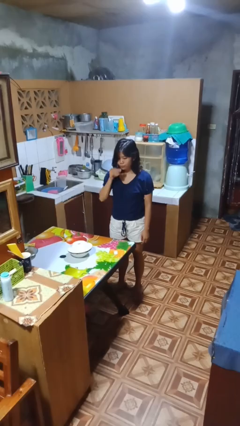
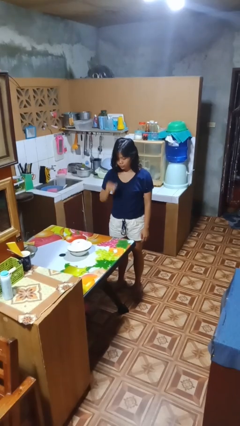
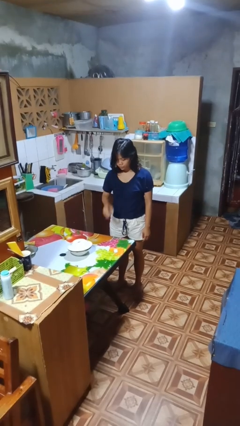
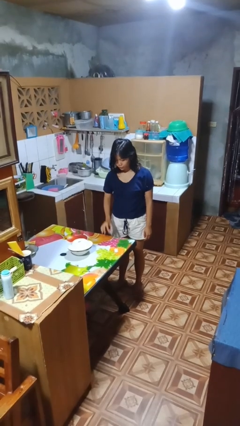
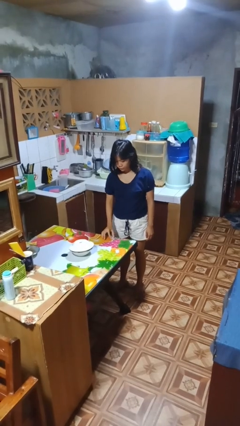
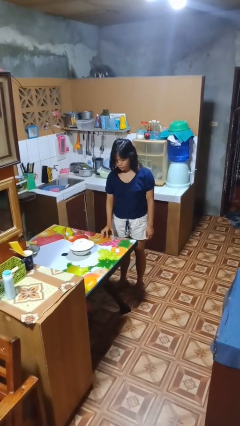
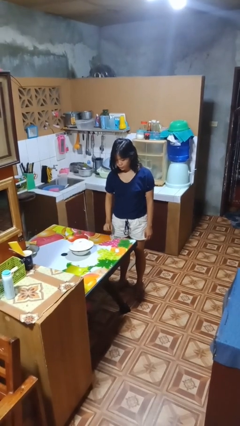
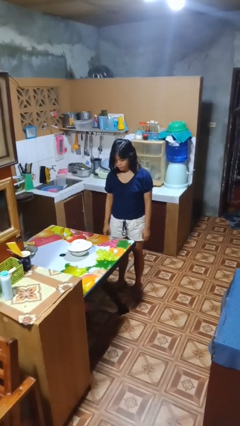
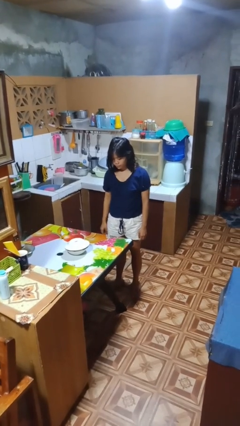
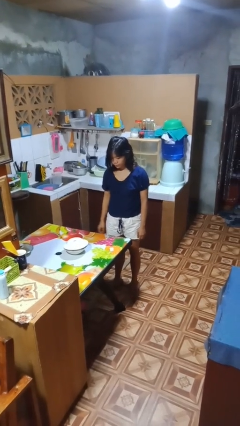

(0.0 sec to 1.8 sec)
person puts down object on table

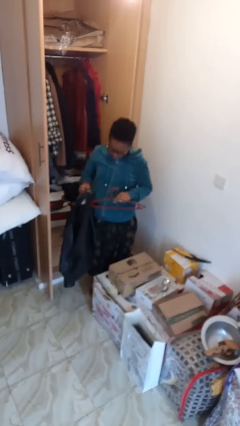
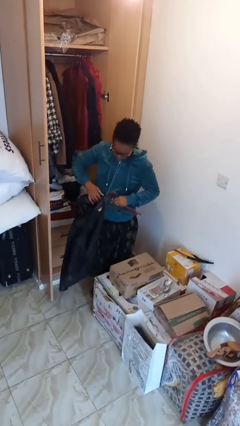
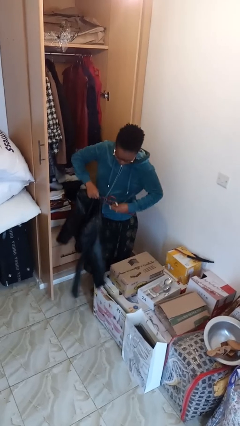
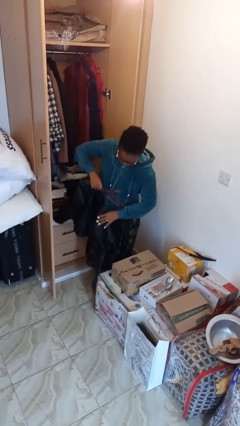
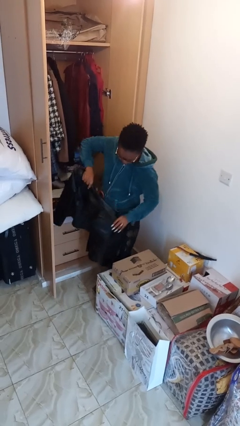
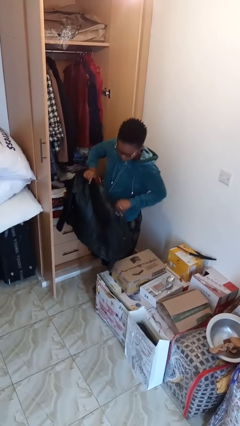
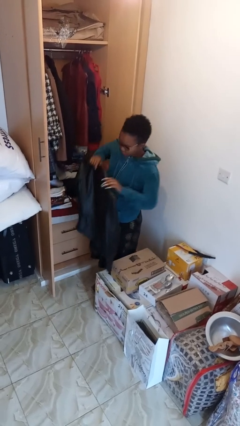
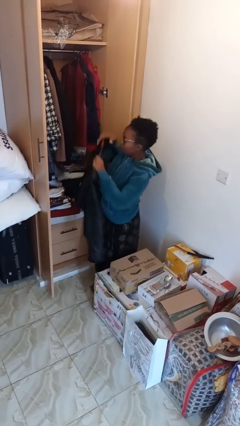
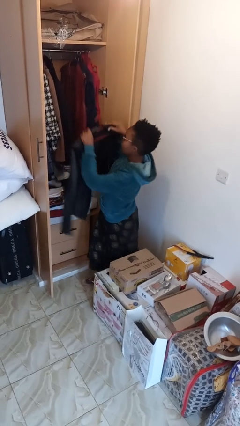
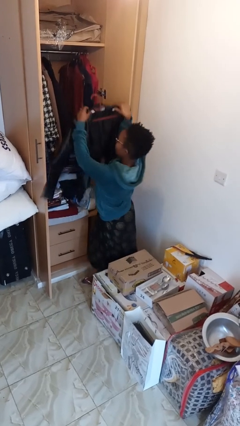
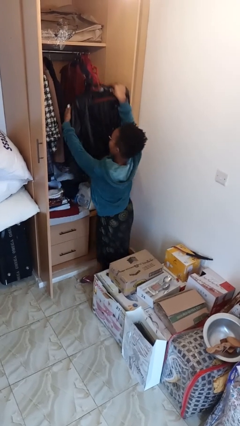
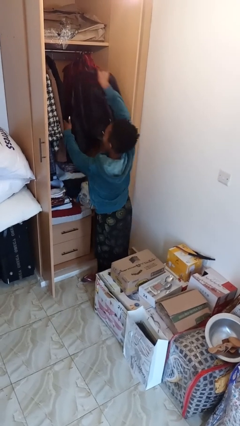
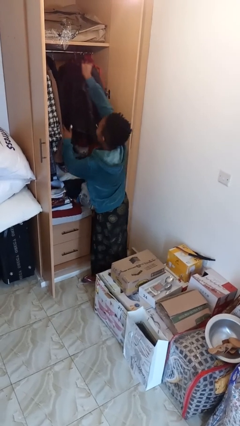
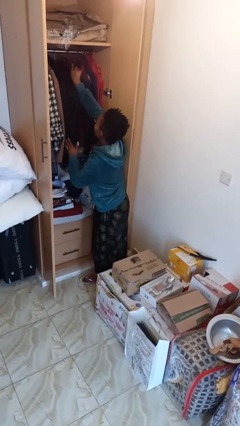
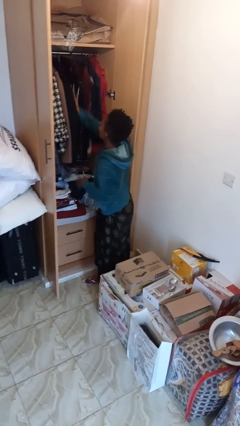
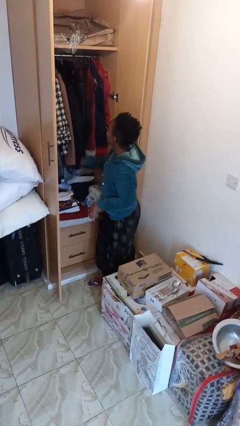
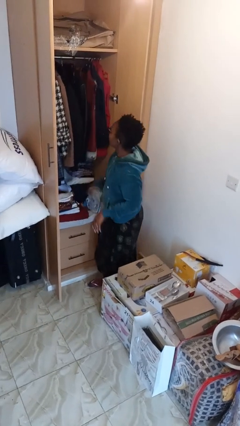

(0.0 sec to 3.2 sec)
person puts clothes into closet

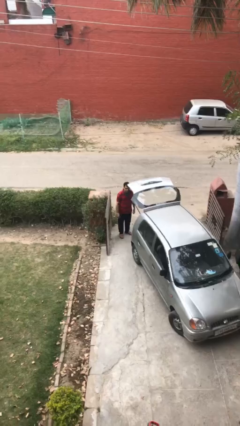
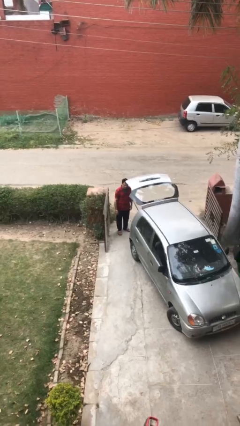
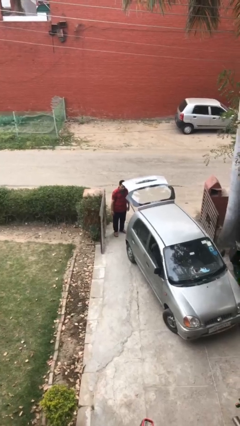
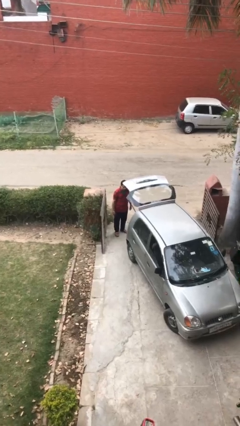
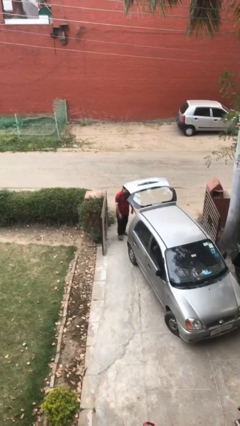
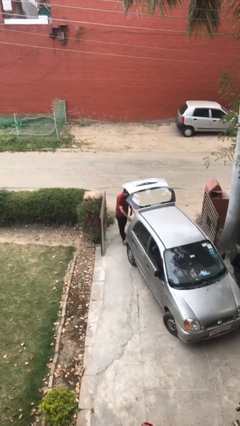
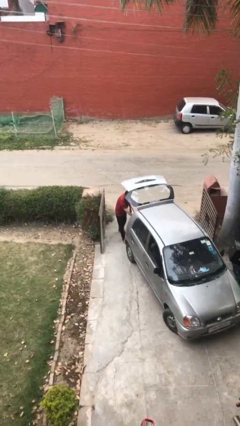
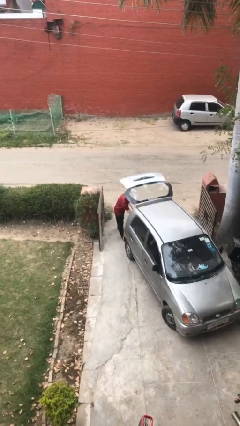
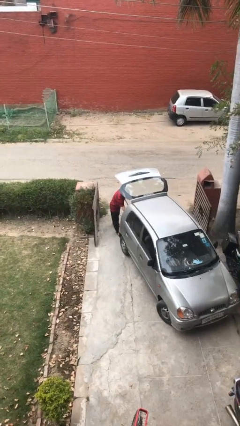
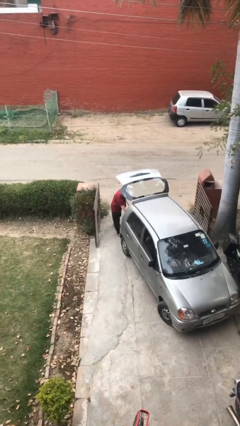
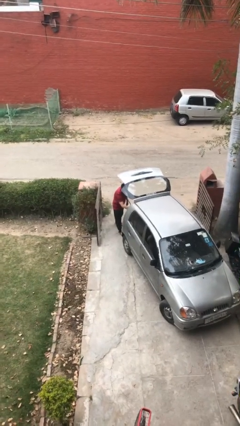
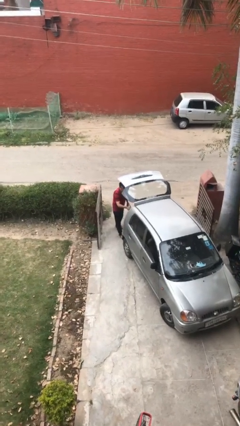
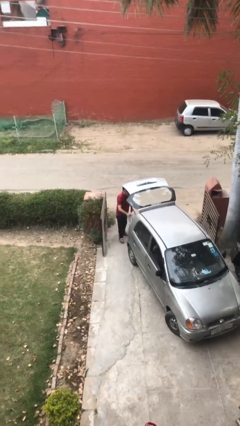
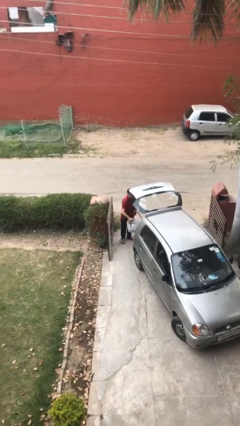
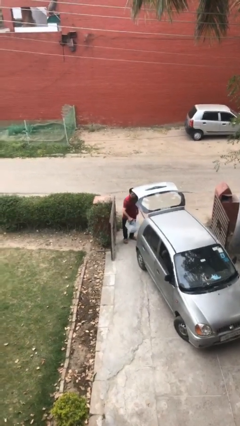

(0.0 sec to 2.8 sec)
person unloads car

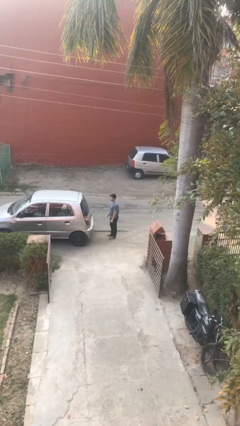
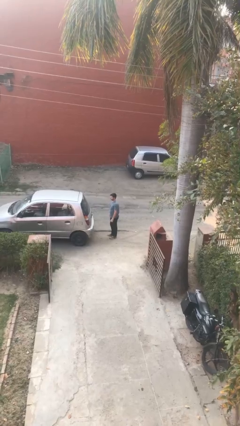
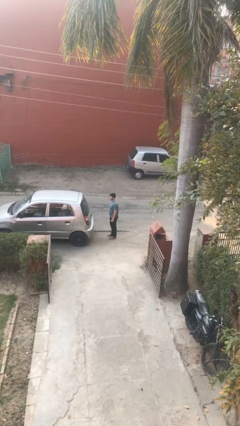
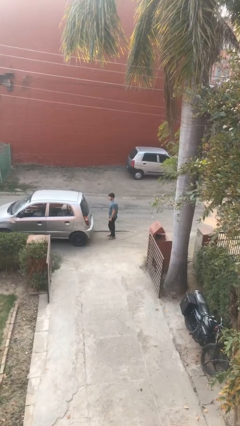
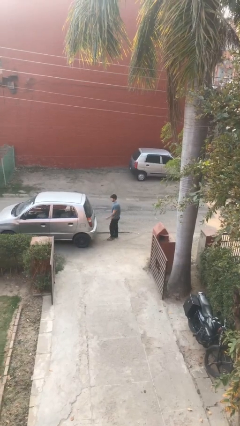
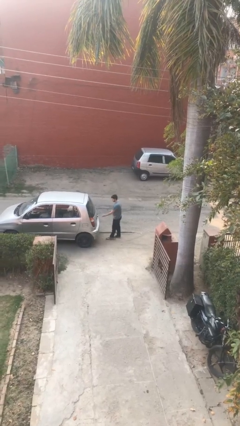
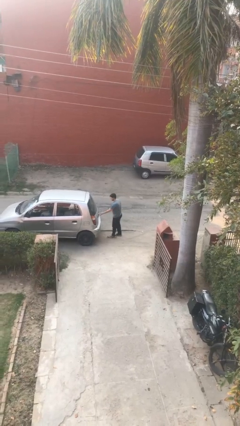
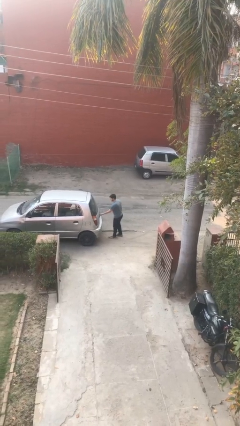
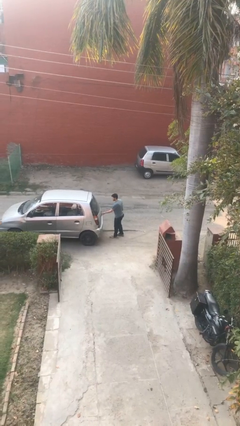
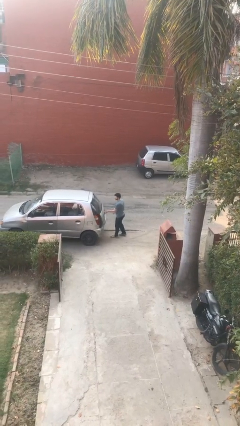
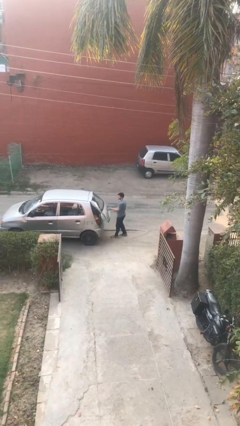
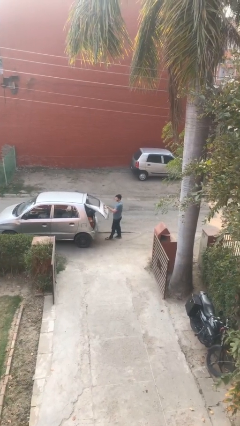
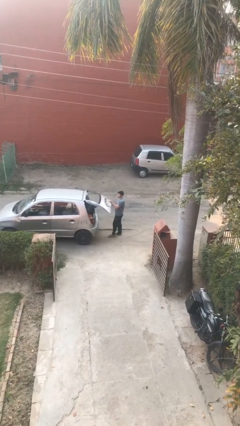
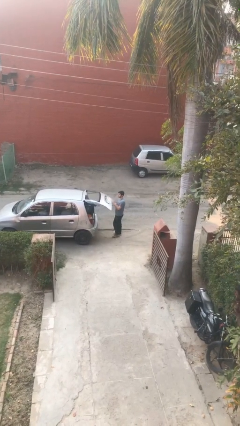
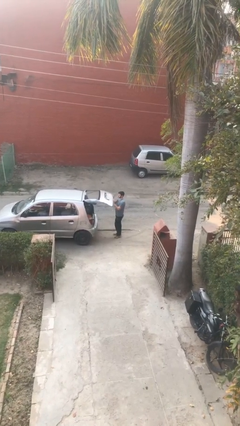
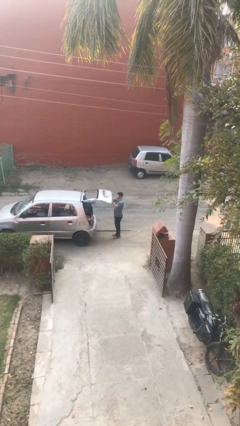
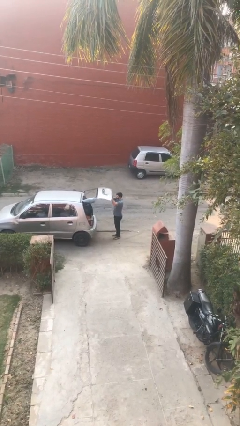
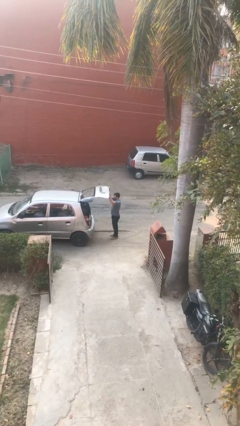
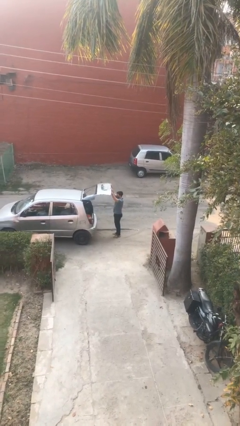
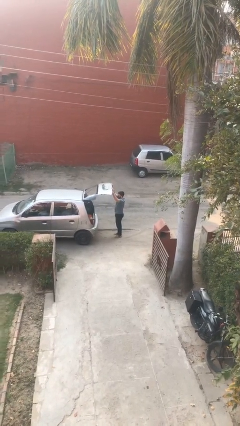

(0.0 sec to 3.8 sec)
person opens car trunk

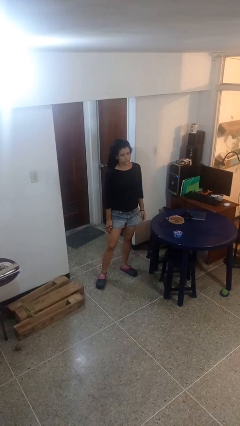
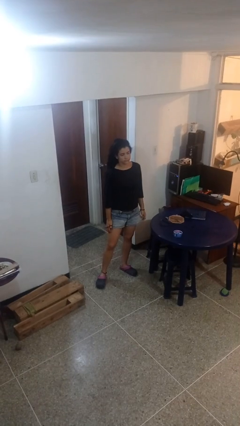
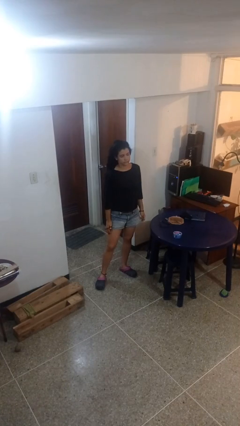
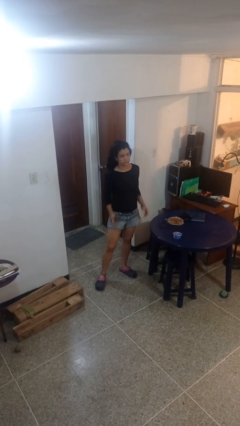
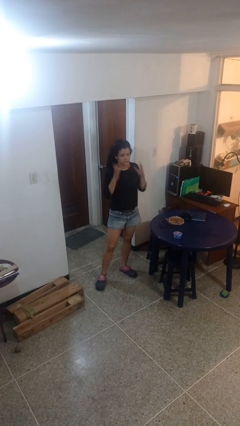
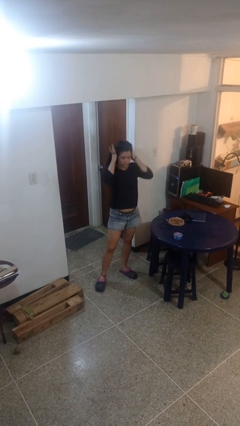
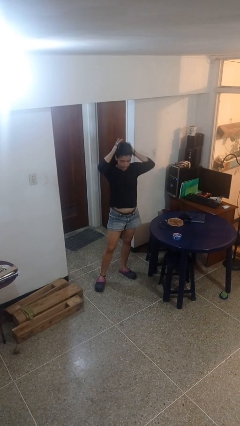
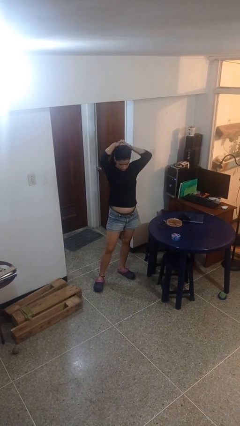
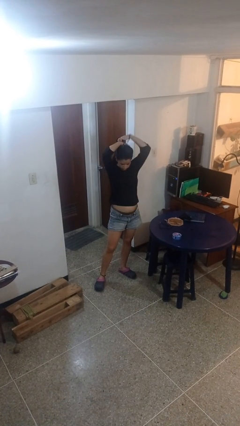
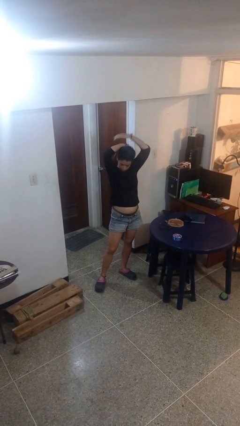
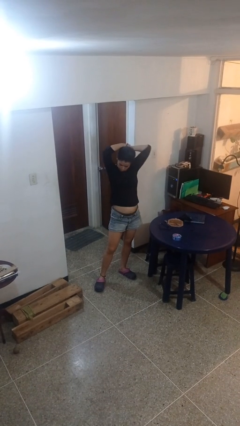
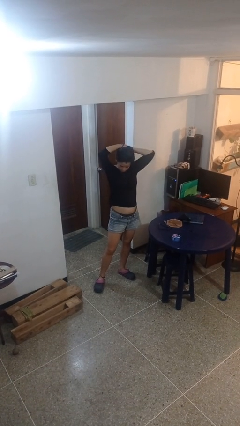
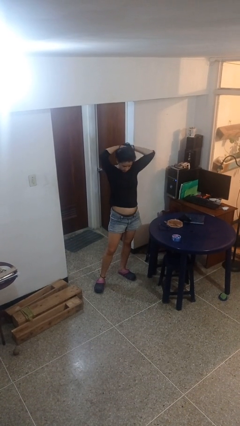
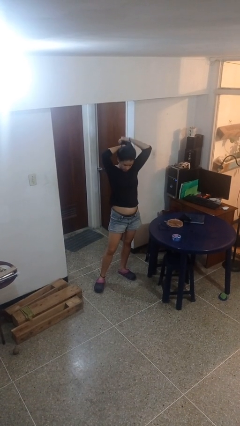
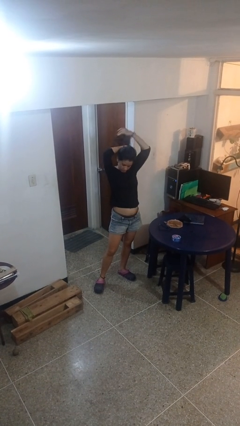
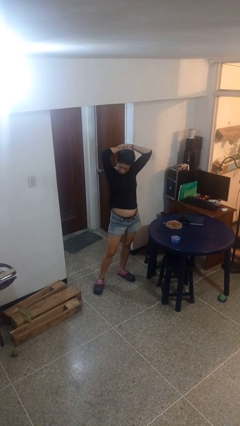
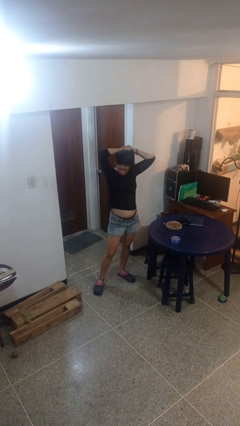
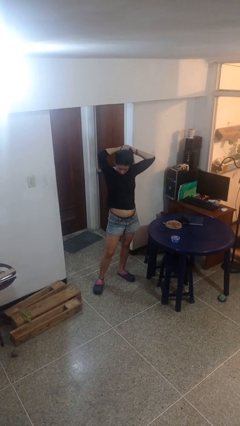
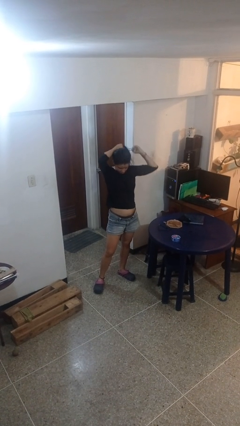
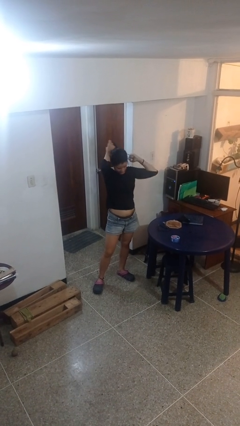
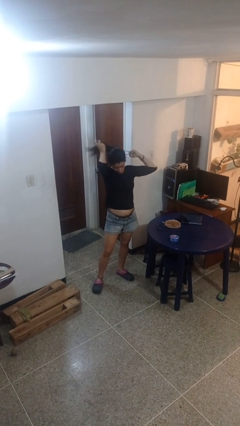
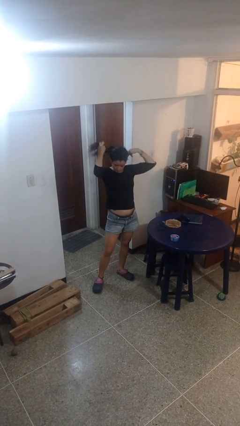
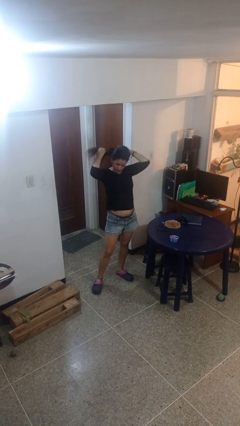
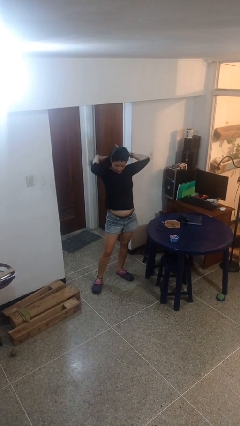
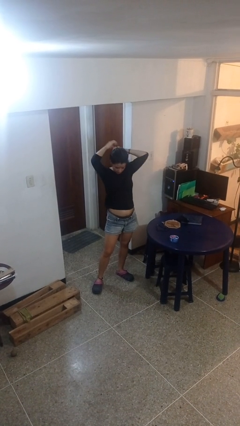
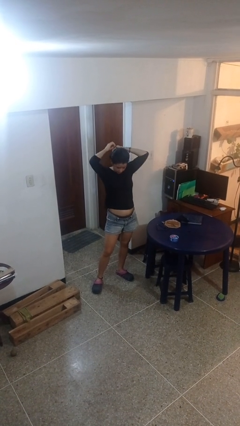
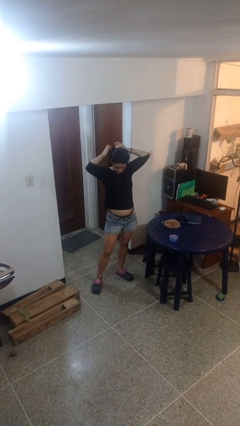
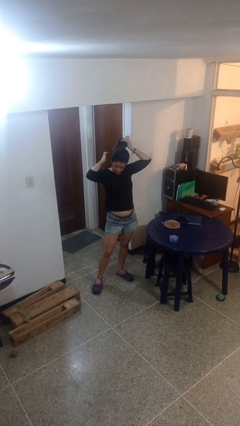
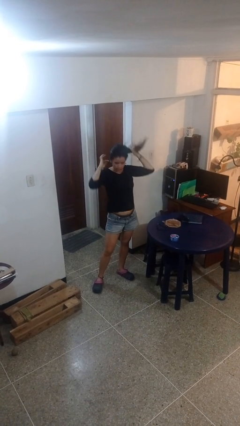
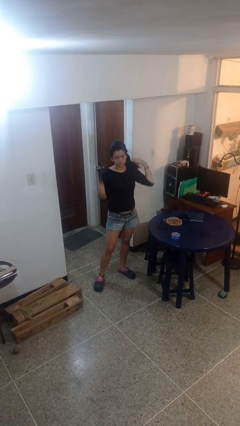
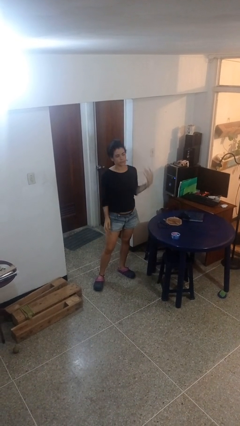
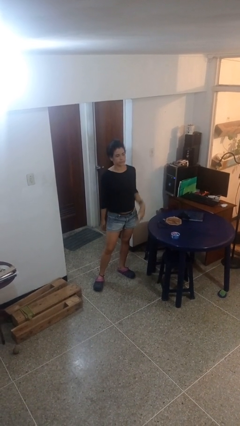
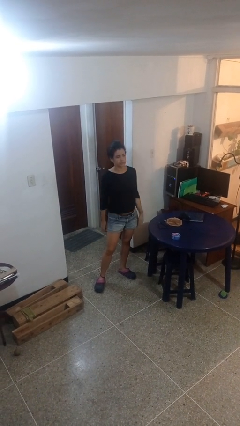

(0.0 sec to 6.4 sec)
person puts hair in ponytail
